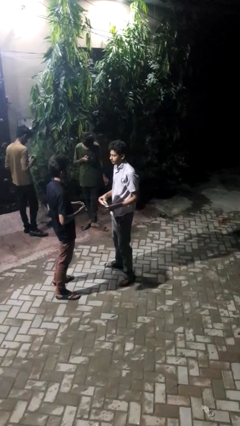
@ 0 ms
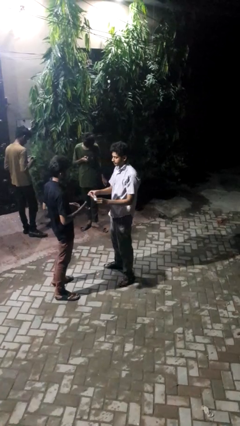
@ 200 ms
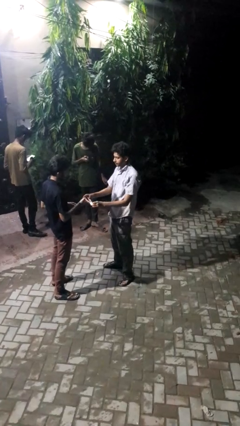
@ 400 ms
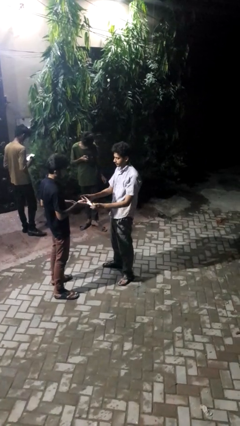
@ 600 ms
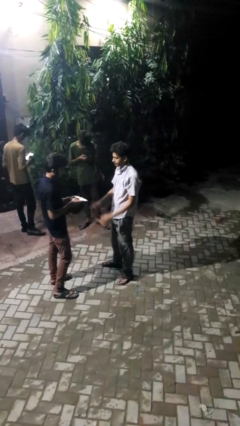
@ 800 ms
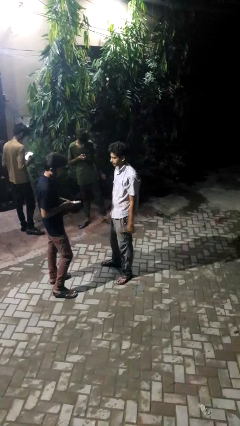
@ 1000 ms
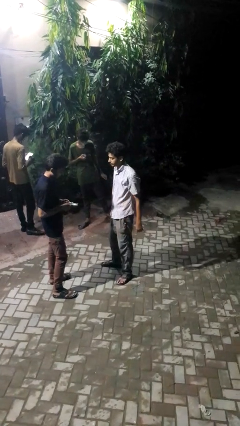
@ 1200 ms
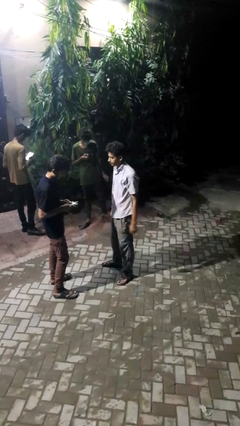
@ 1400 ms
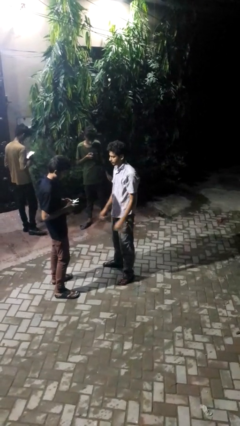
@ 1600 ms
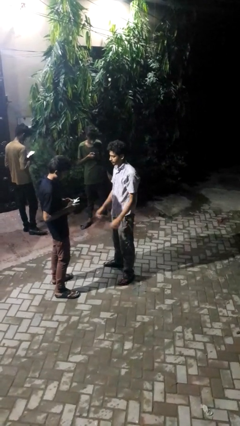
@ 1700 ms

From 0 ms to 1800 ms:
person transfers object to person

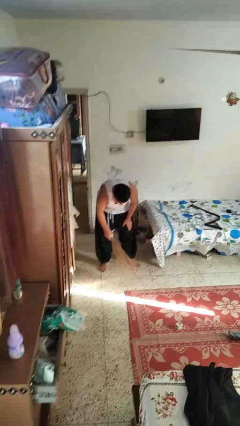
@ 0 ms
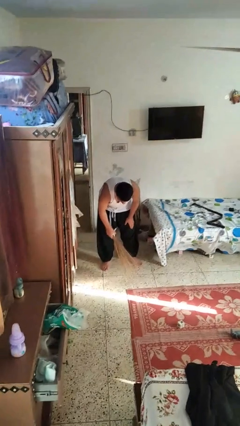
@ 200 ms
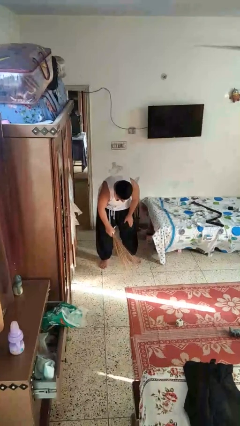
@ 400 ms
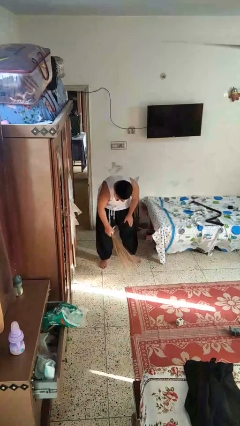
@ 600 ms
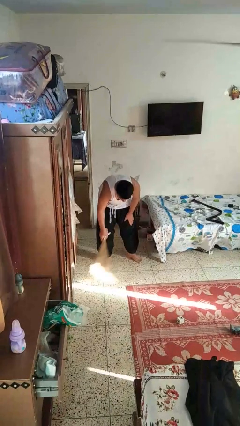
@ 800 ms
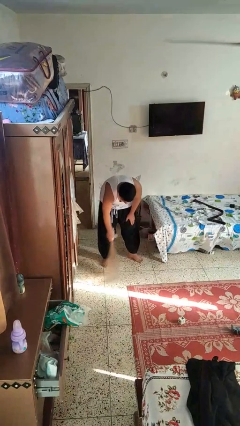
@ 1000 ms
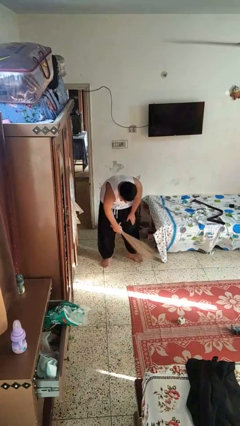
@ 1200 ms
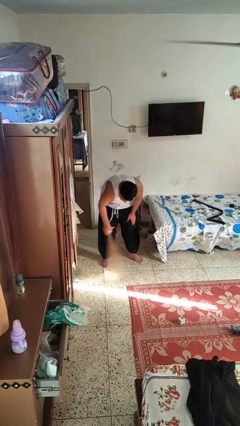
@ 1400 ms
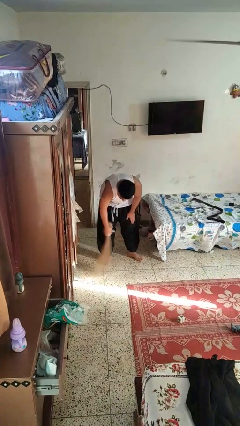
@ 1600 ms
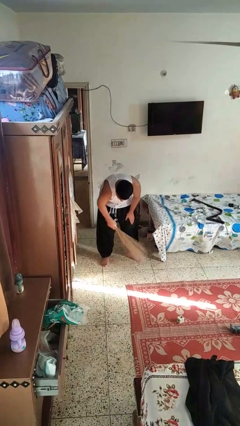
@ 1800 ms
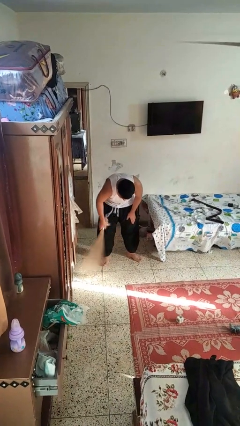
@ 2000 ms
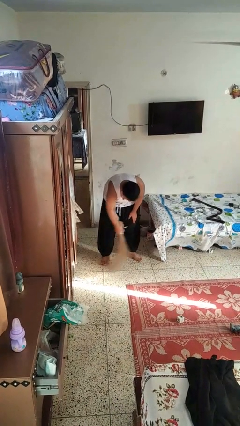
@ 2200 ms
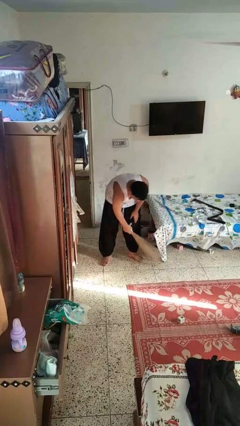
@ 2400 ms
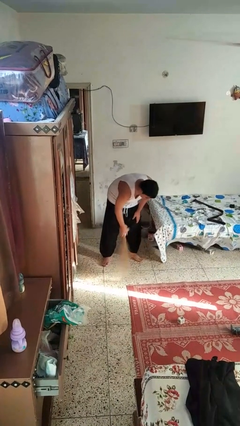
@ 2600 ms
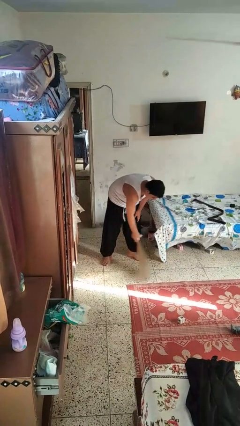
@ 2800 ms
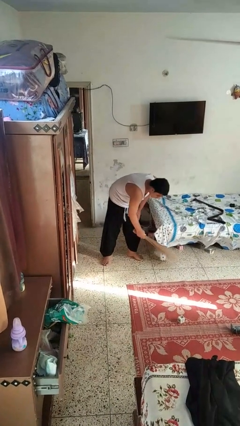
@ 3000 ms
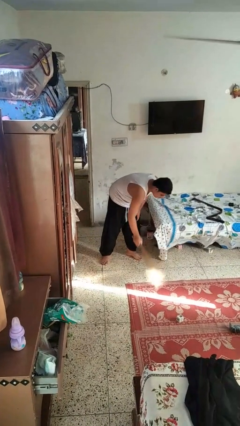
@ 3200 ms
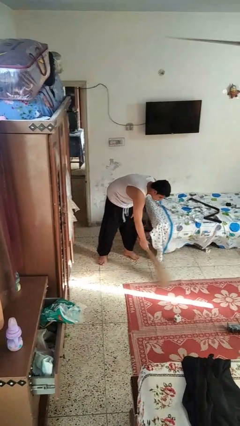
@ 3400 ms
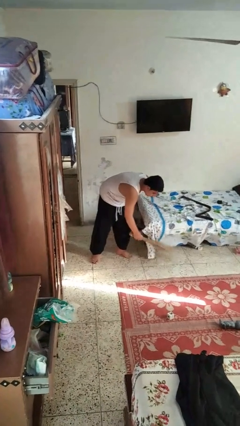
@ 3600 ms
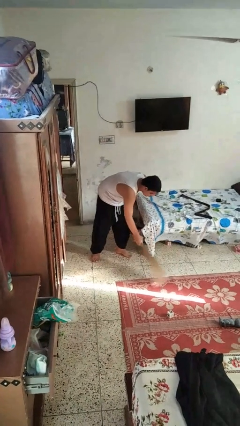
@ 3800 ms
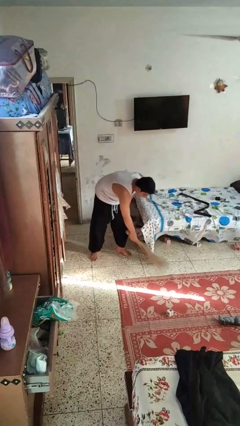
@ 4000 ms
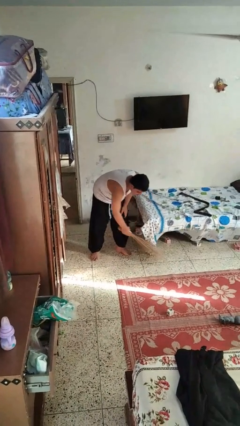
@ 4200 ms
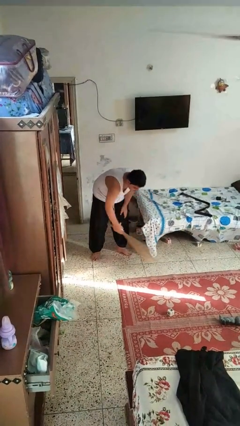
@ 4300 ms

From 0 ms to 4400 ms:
person sweeps floor

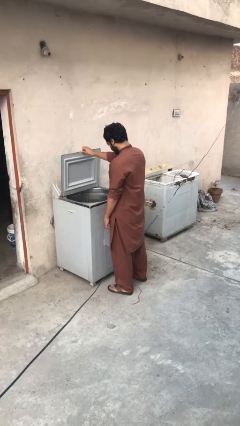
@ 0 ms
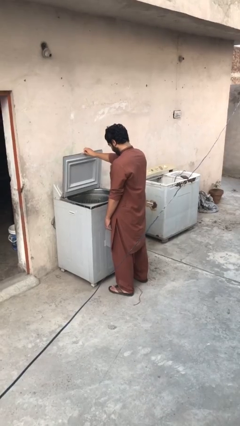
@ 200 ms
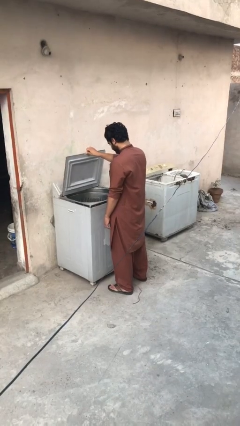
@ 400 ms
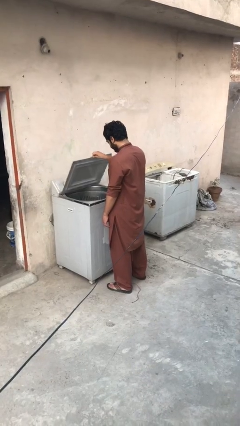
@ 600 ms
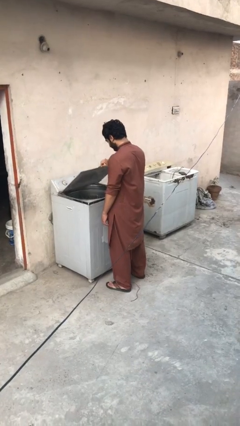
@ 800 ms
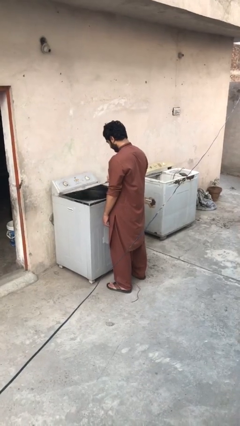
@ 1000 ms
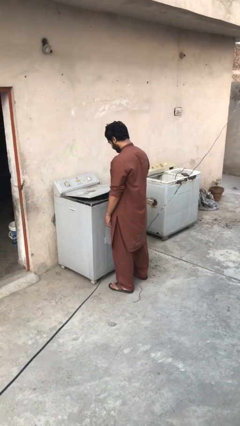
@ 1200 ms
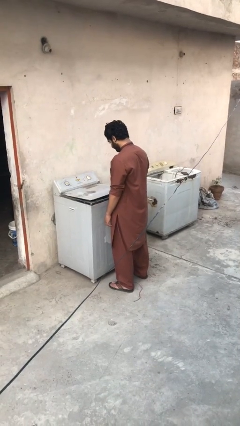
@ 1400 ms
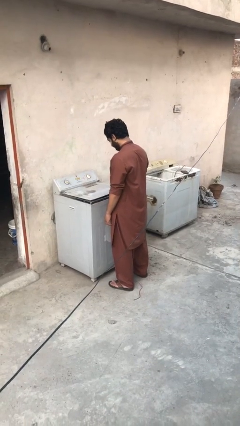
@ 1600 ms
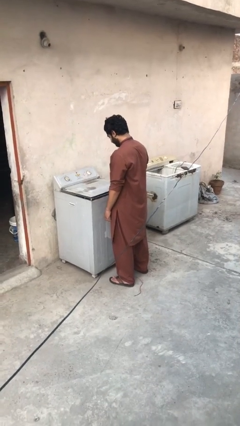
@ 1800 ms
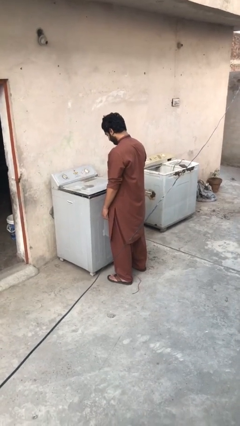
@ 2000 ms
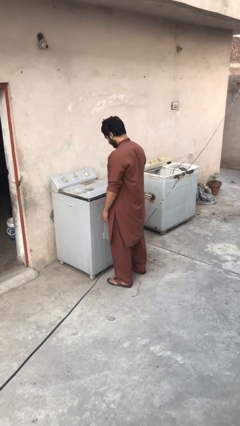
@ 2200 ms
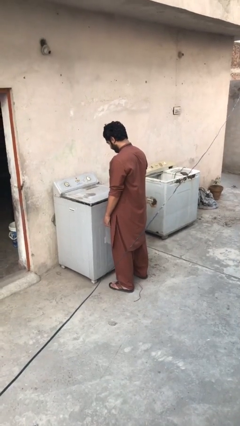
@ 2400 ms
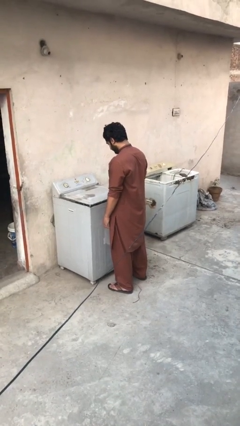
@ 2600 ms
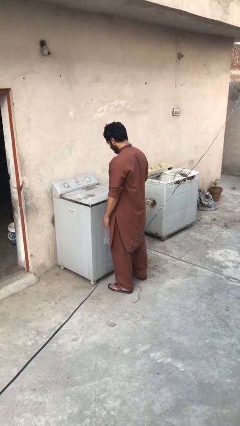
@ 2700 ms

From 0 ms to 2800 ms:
person closes clothes washer

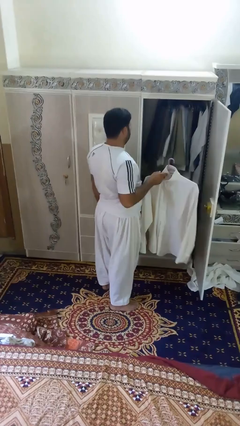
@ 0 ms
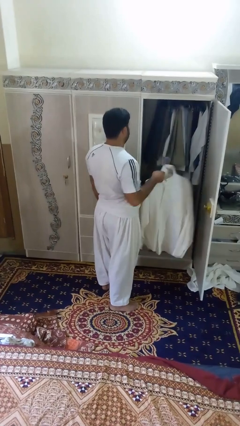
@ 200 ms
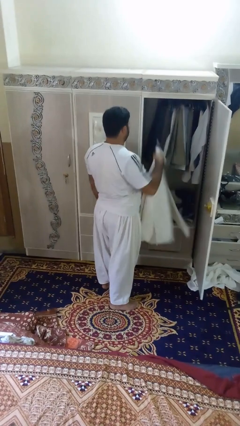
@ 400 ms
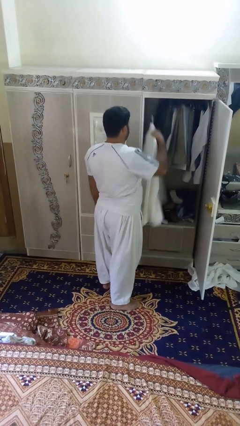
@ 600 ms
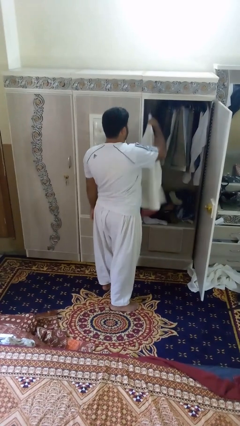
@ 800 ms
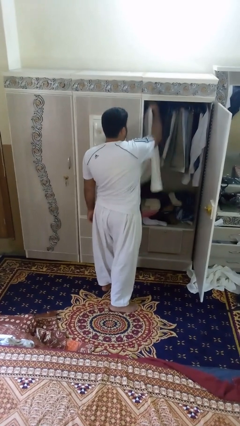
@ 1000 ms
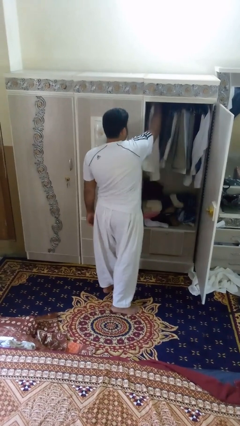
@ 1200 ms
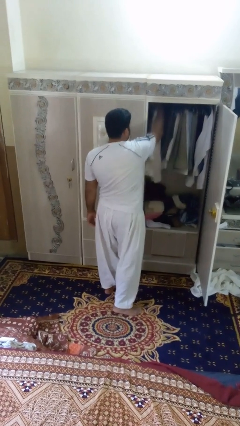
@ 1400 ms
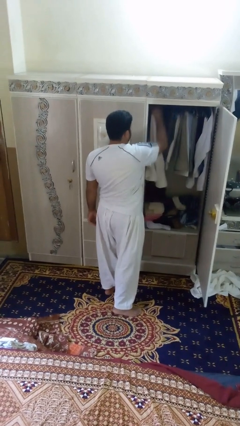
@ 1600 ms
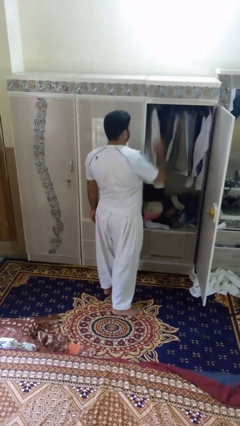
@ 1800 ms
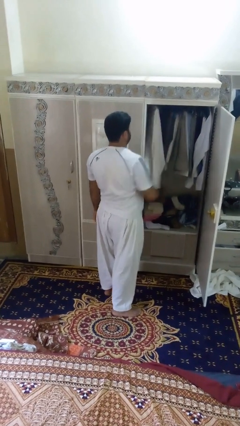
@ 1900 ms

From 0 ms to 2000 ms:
person puts clothes into closet

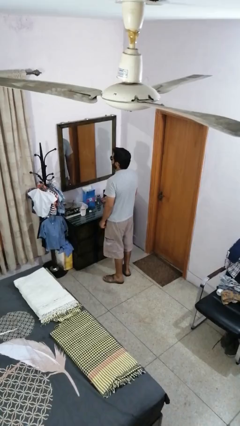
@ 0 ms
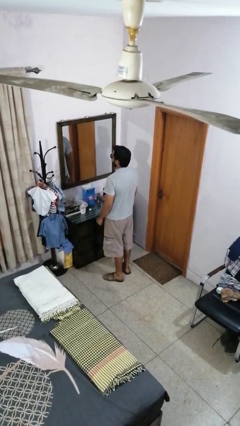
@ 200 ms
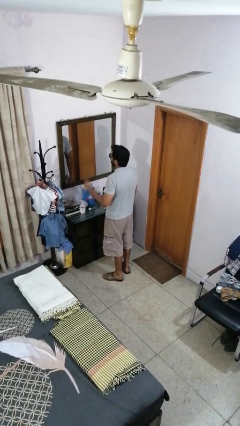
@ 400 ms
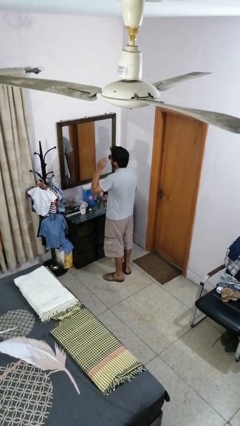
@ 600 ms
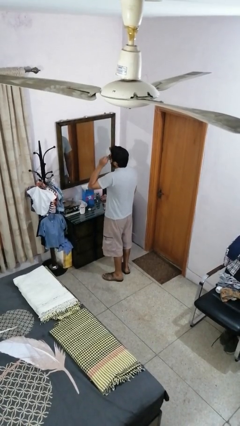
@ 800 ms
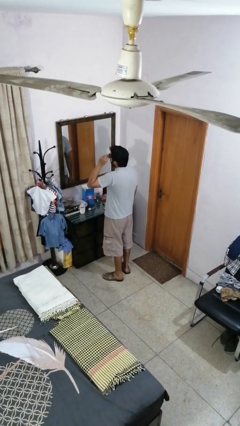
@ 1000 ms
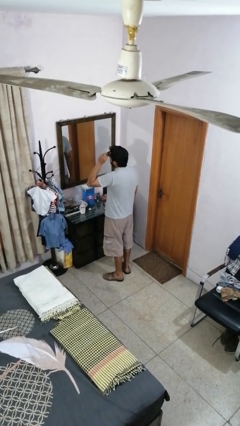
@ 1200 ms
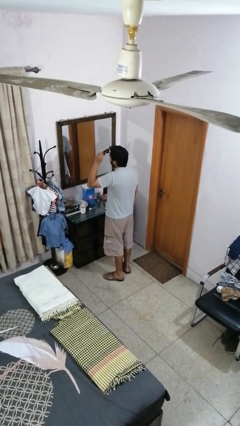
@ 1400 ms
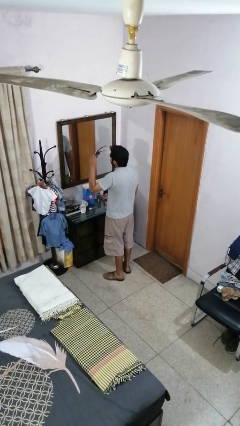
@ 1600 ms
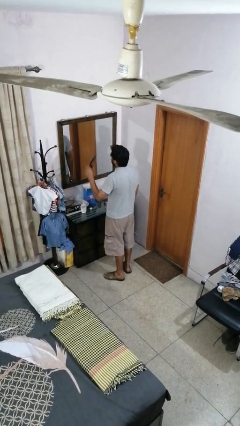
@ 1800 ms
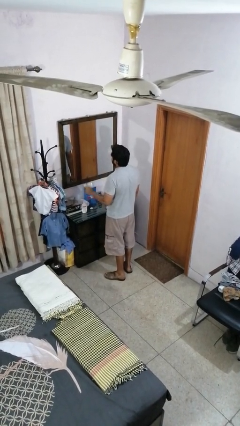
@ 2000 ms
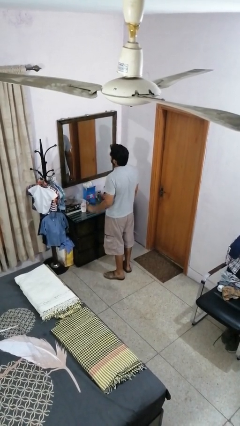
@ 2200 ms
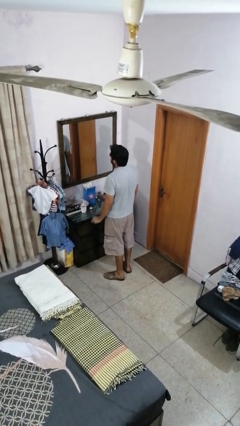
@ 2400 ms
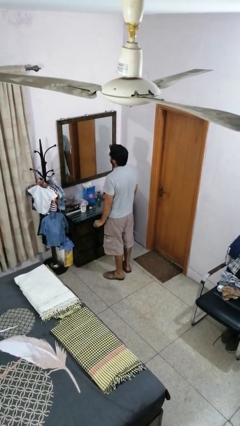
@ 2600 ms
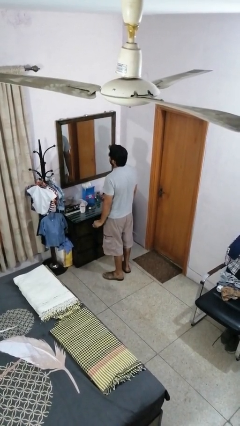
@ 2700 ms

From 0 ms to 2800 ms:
person takes off sunglasses

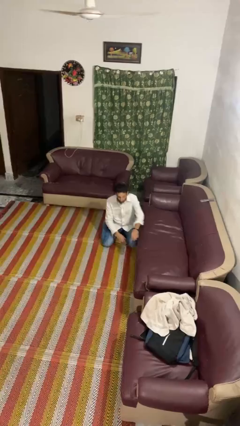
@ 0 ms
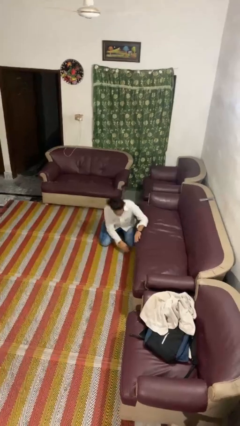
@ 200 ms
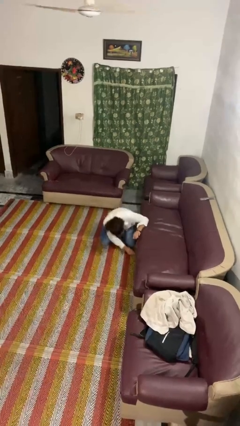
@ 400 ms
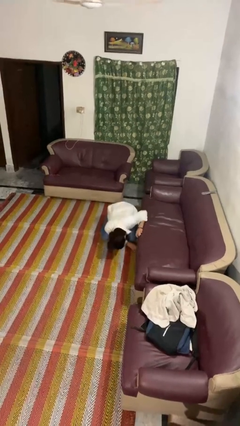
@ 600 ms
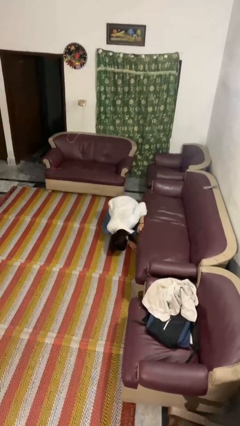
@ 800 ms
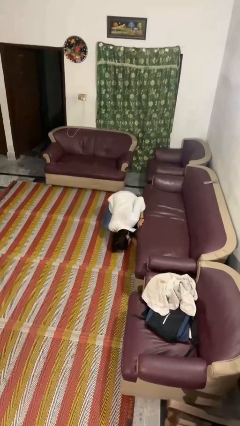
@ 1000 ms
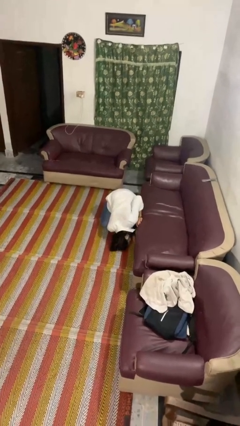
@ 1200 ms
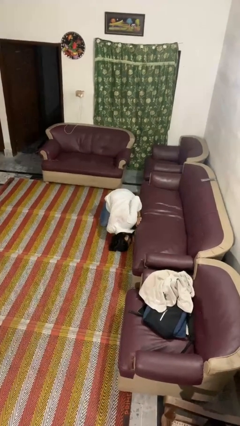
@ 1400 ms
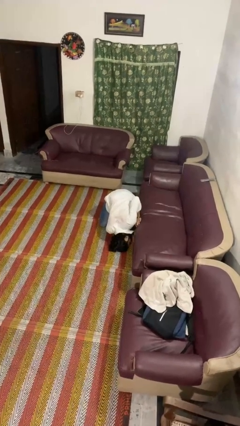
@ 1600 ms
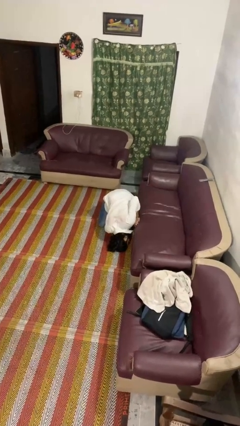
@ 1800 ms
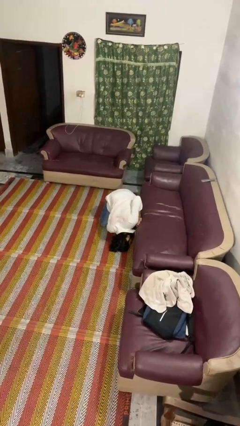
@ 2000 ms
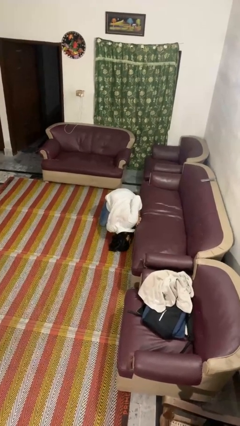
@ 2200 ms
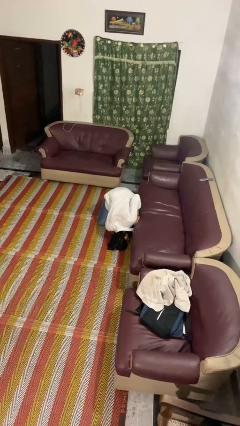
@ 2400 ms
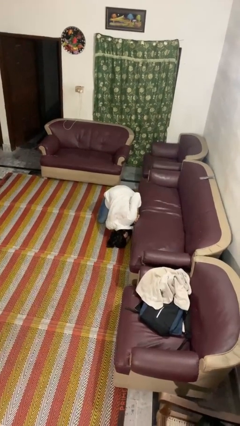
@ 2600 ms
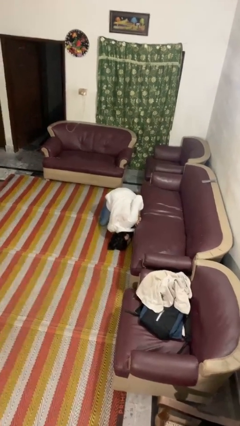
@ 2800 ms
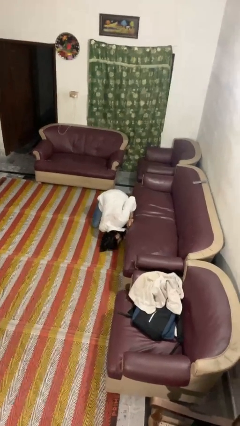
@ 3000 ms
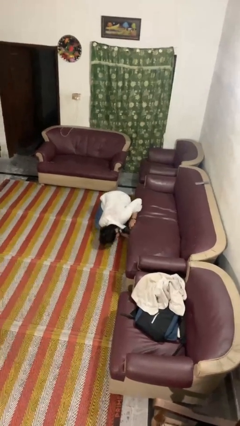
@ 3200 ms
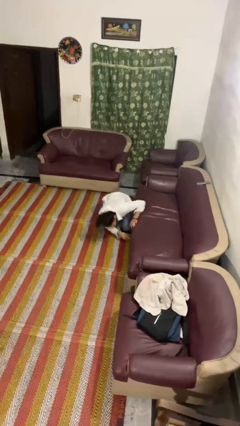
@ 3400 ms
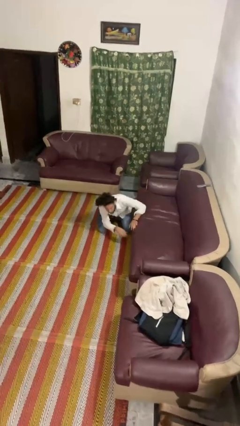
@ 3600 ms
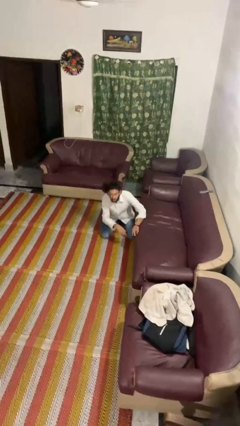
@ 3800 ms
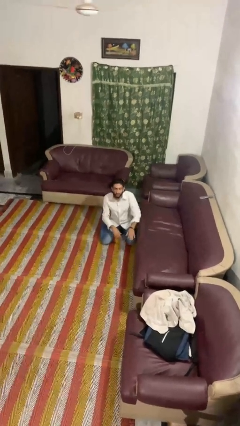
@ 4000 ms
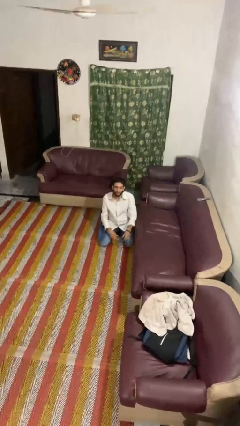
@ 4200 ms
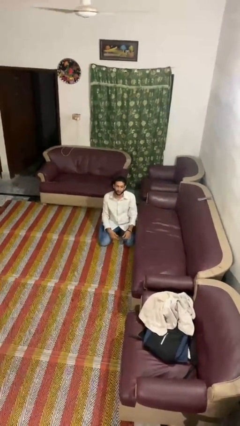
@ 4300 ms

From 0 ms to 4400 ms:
person searches under couch
